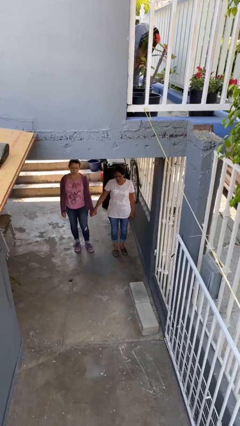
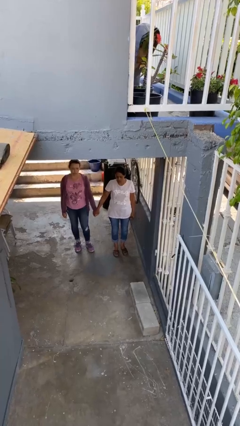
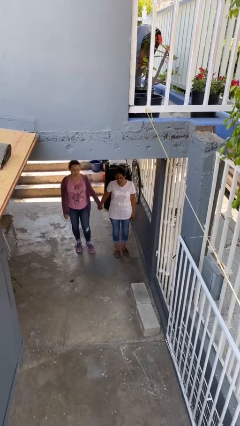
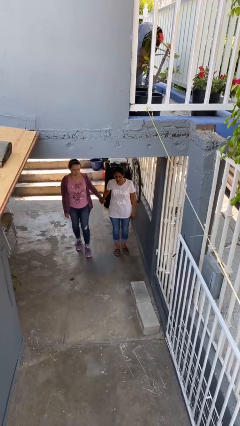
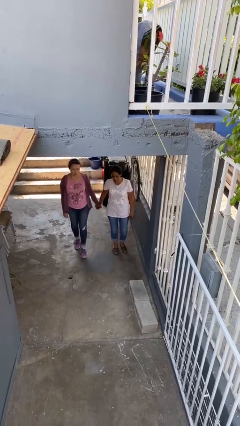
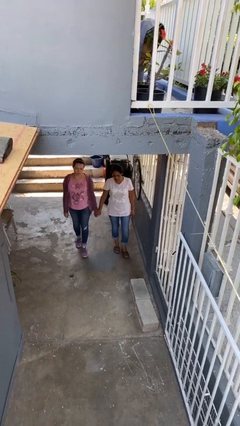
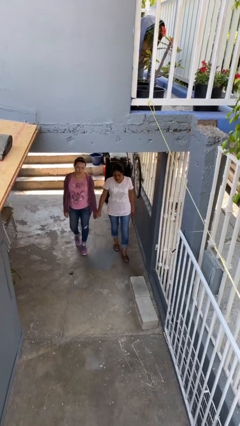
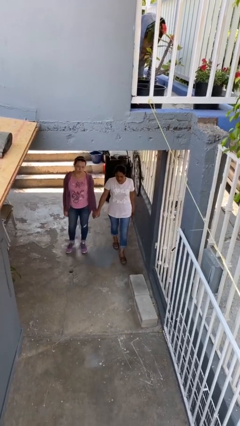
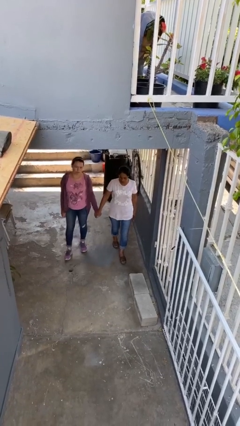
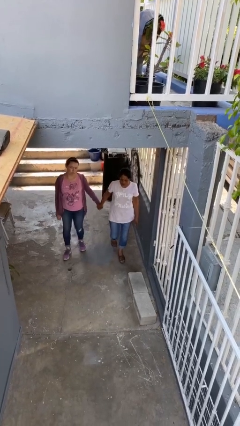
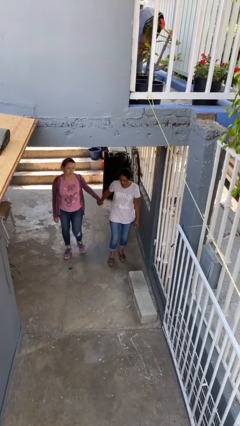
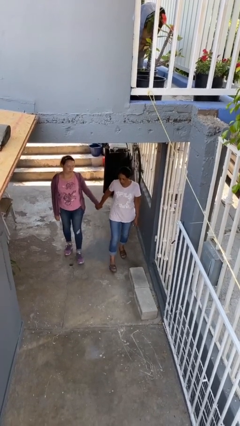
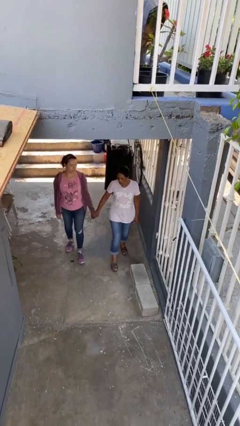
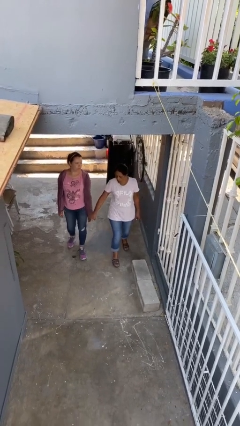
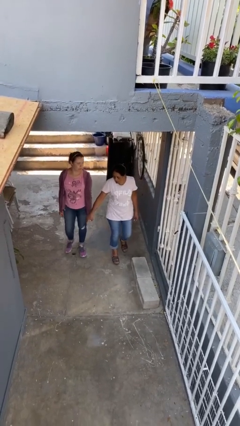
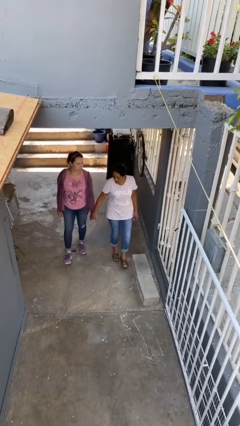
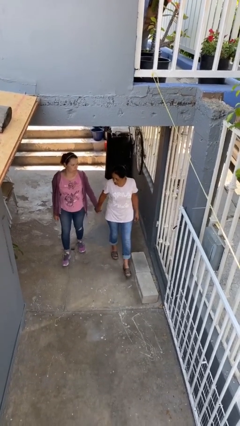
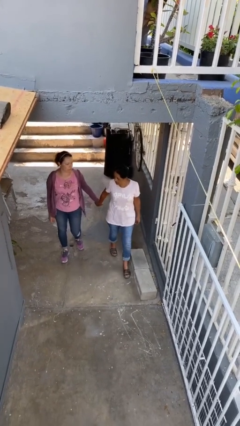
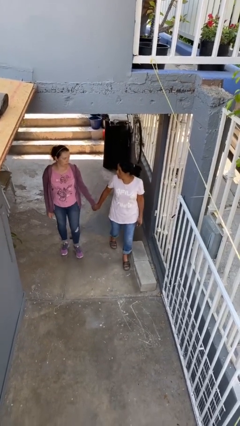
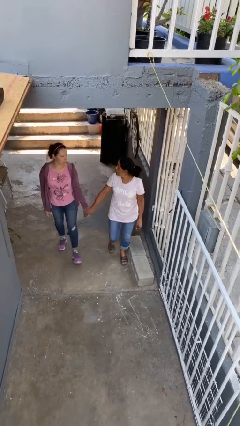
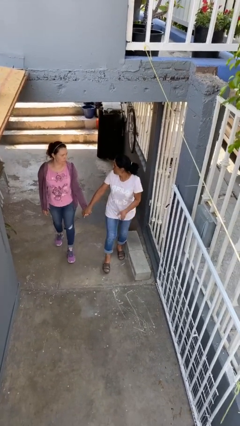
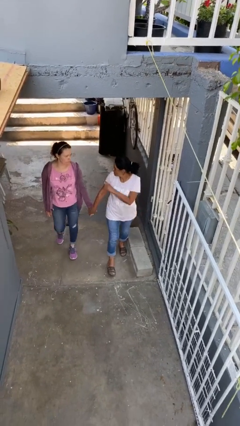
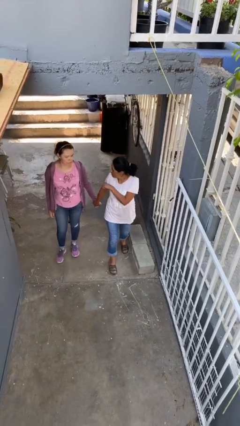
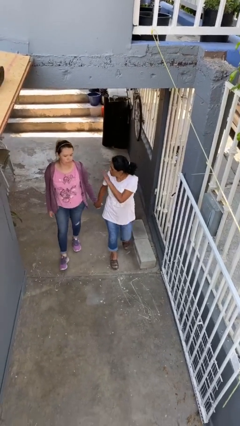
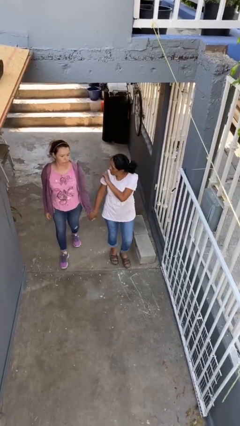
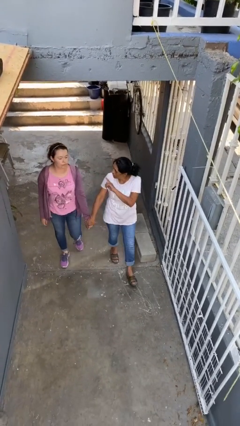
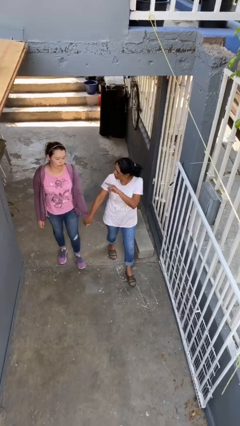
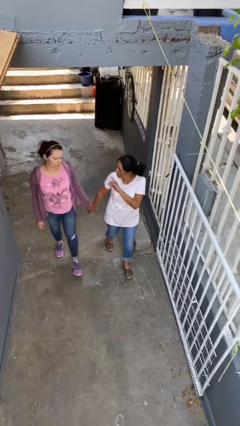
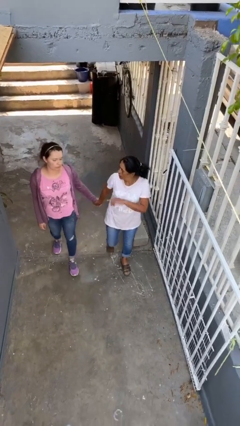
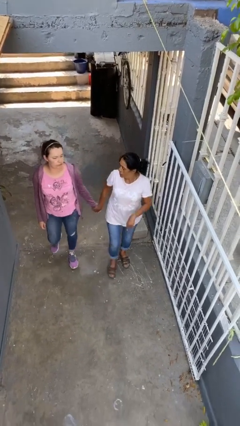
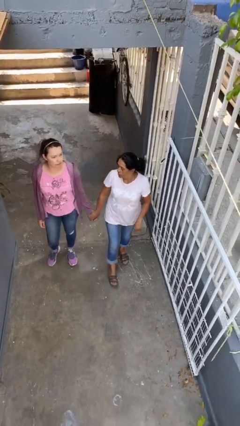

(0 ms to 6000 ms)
person holds hand

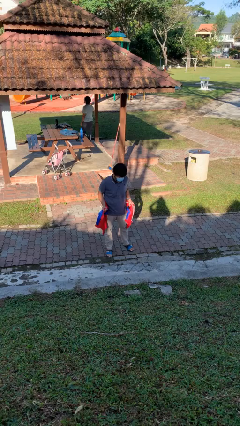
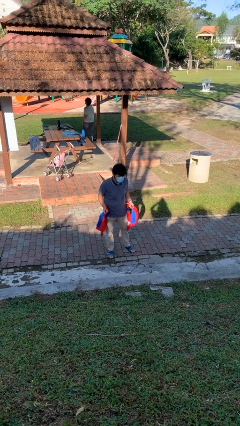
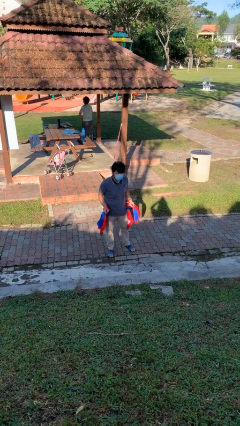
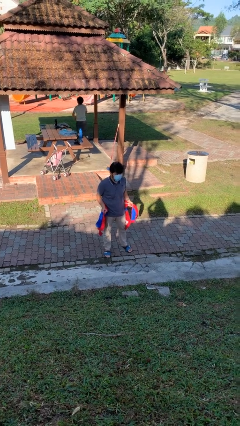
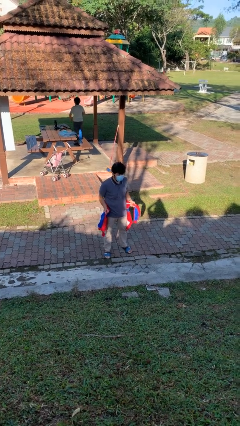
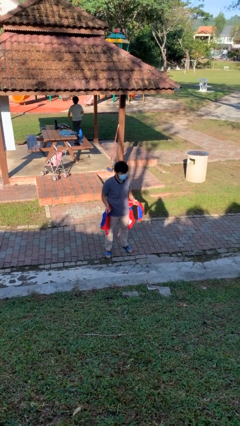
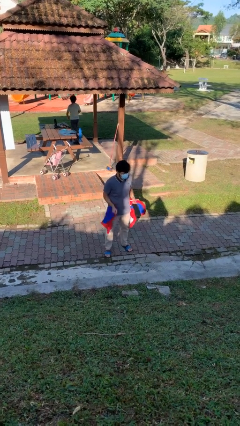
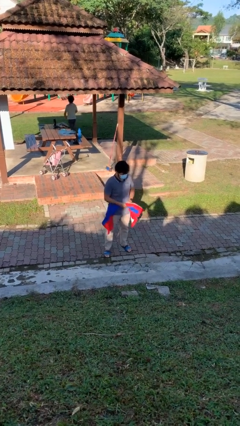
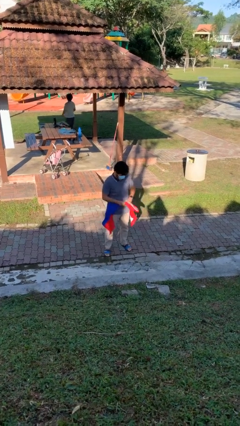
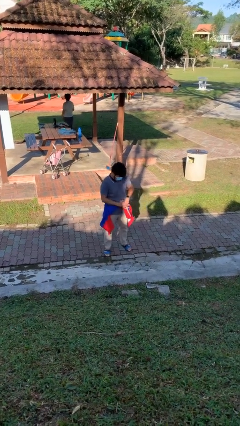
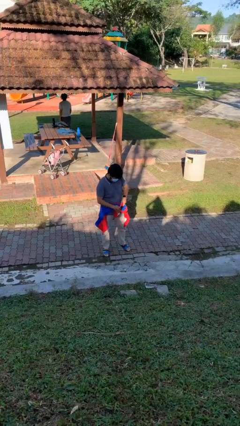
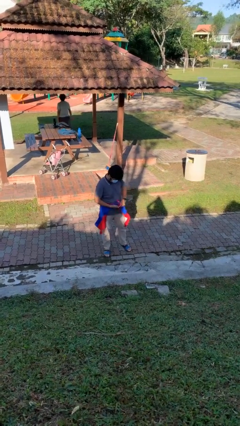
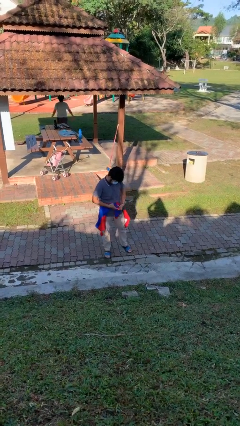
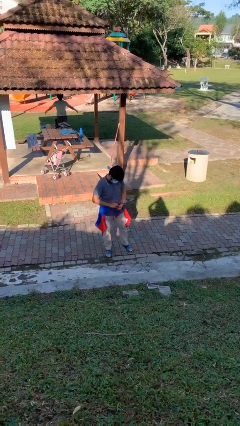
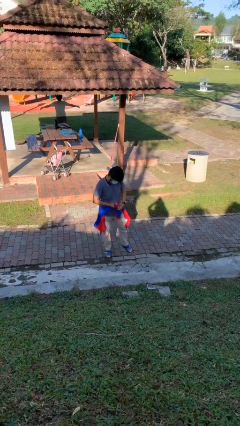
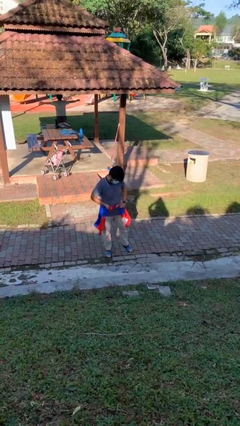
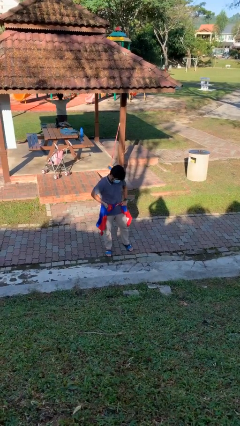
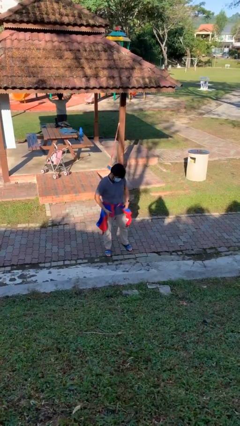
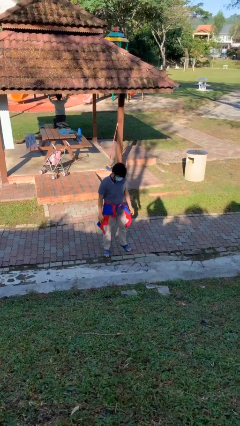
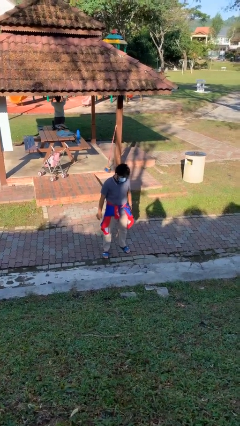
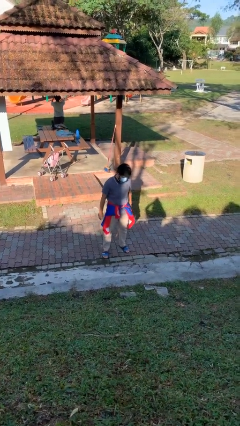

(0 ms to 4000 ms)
person ties jacket around waist

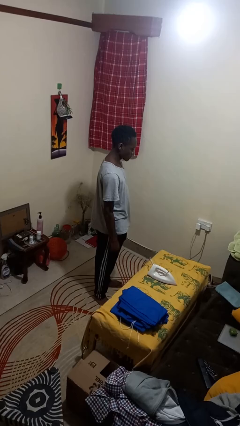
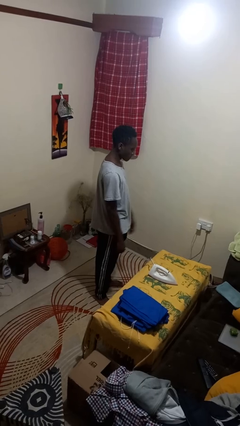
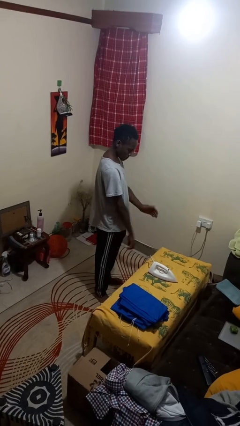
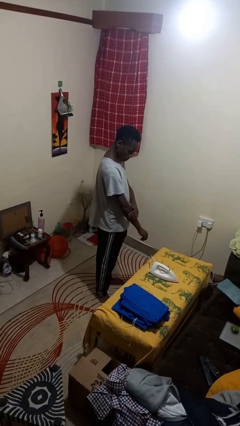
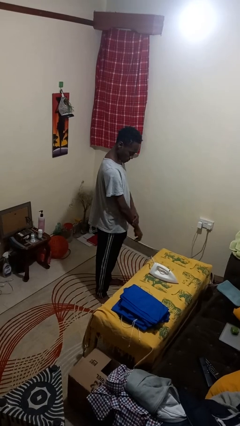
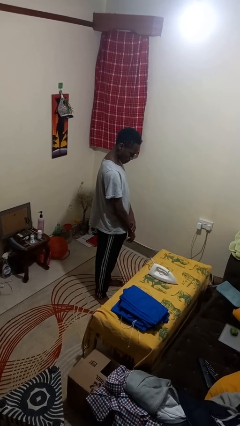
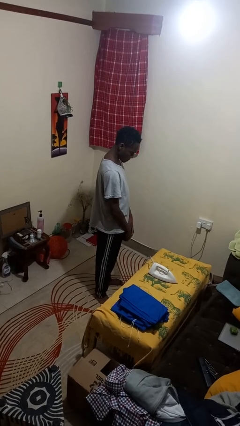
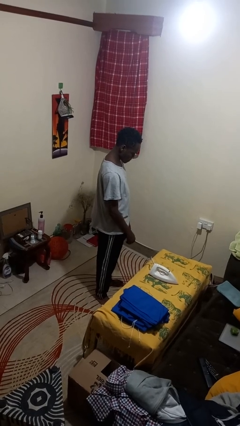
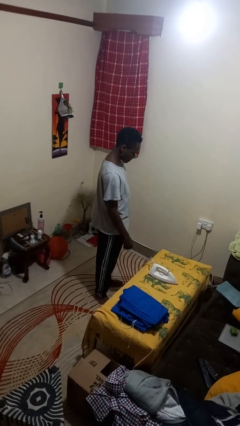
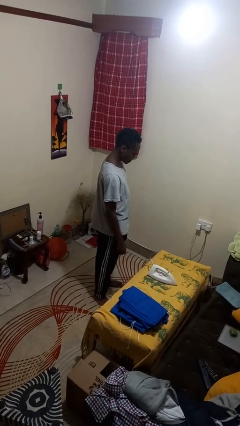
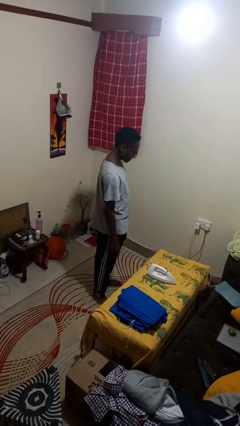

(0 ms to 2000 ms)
person swats bug

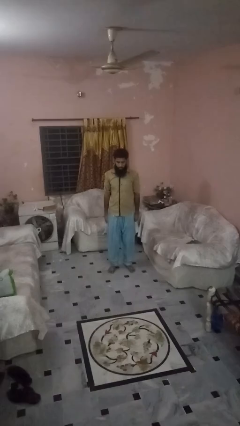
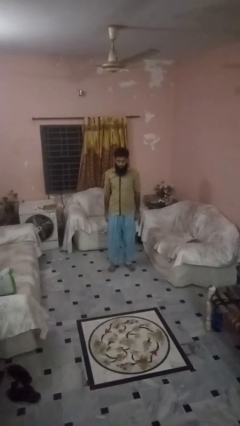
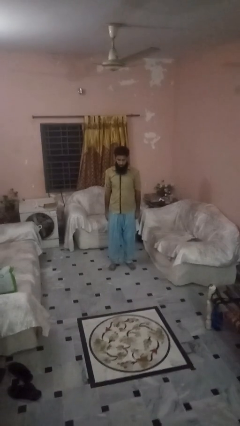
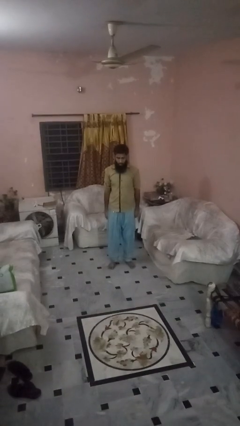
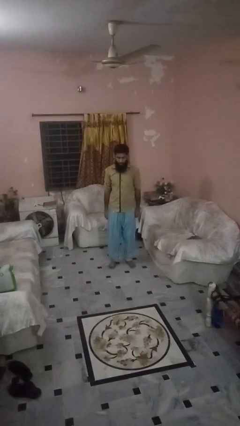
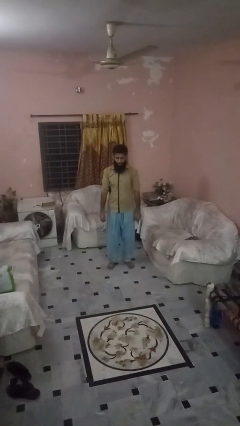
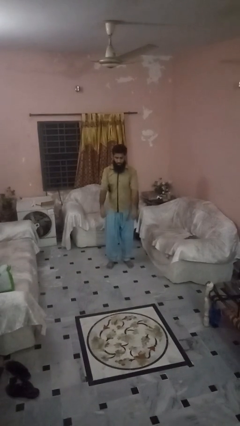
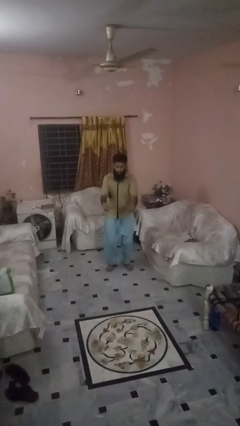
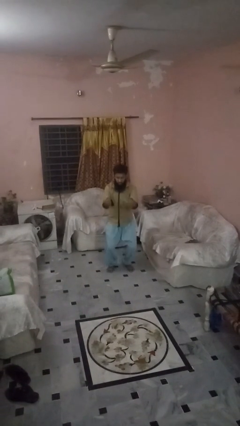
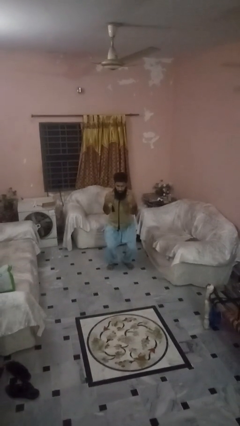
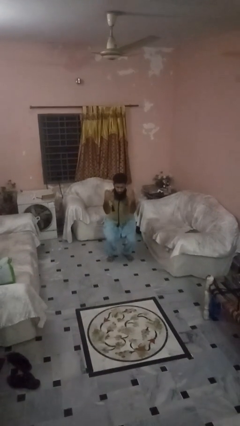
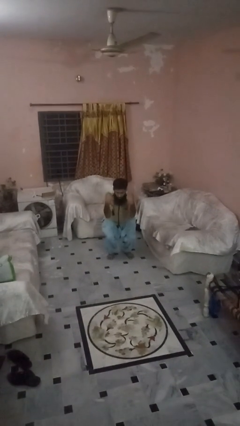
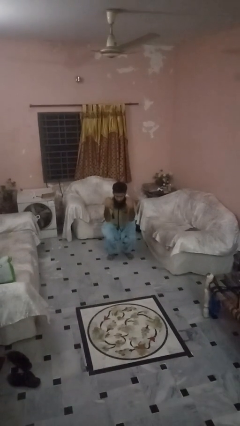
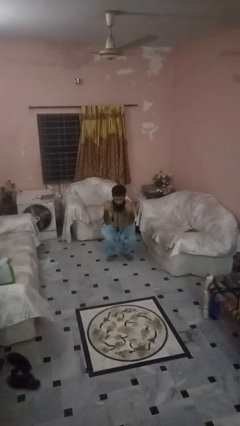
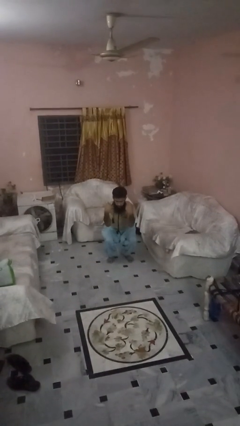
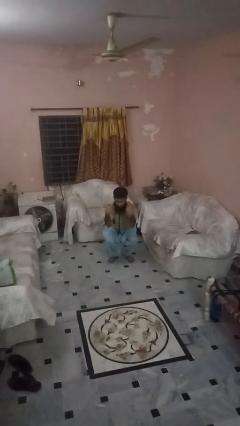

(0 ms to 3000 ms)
person squats

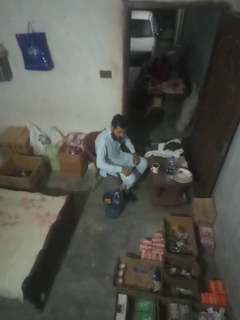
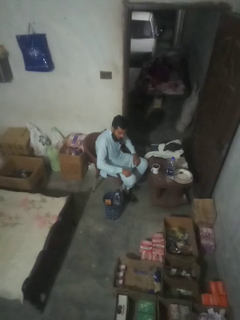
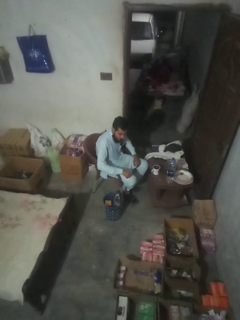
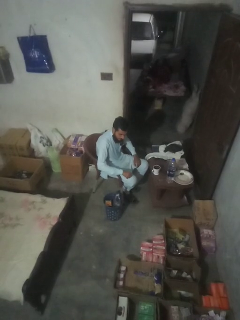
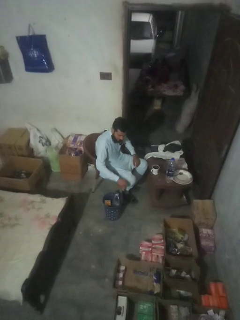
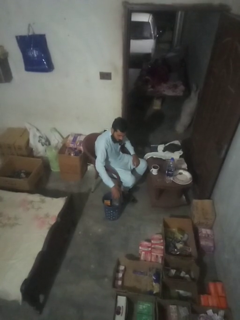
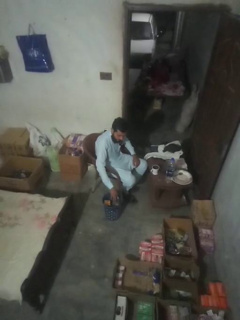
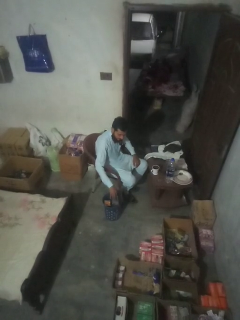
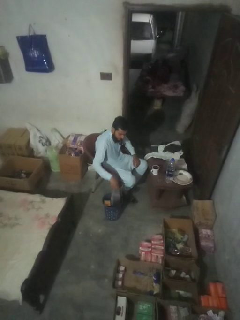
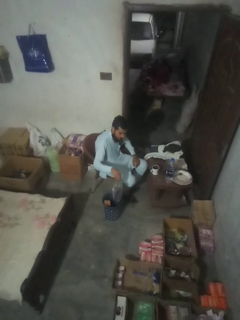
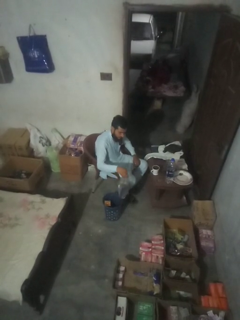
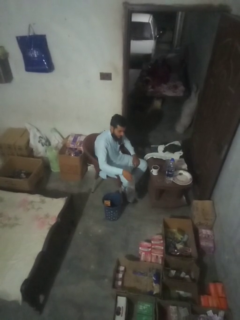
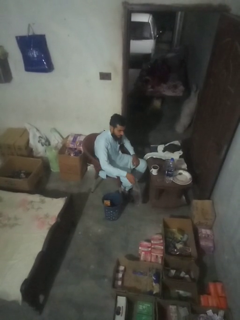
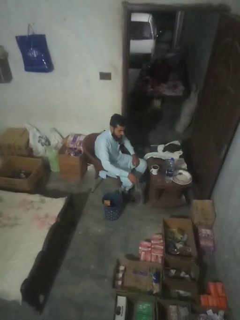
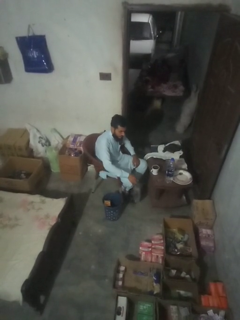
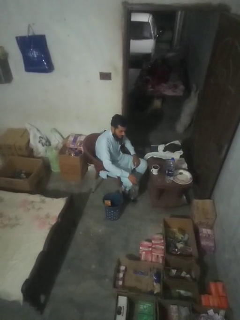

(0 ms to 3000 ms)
person inserts trashbag into trashcan
